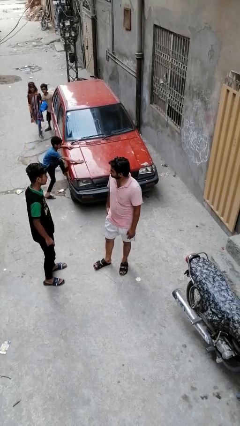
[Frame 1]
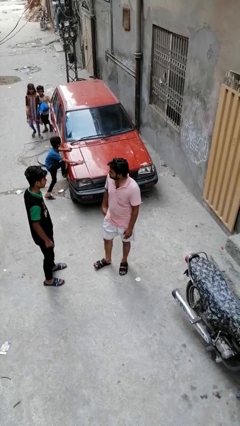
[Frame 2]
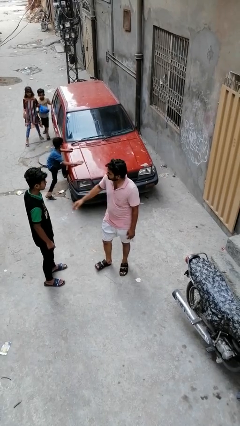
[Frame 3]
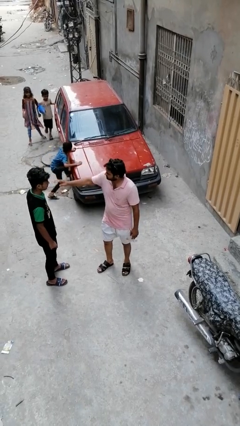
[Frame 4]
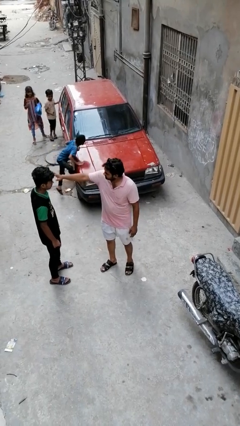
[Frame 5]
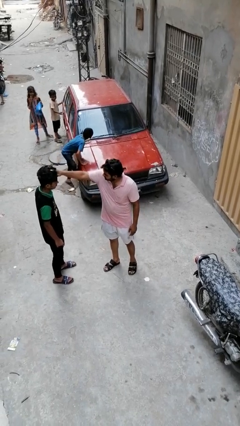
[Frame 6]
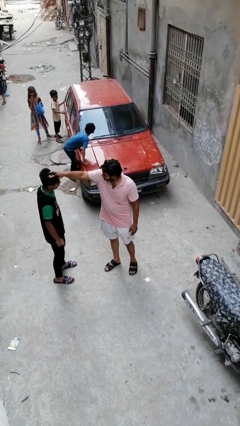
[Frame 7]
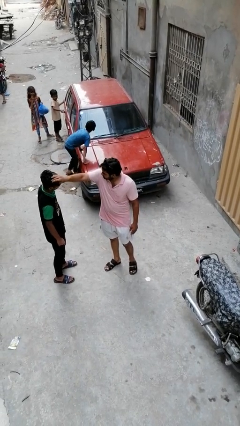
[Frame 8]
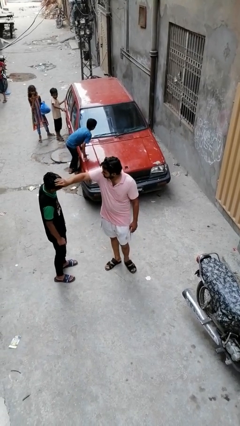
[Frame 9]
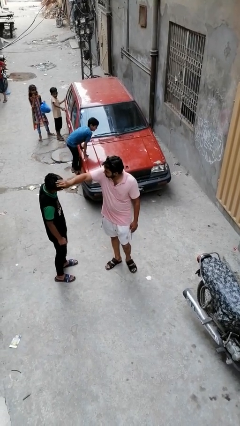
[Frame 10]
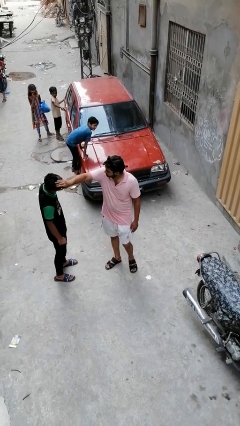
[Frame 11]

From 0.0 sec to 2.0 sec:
person grabs person by hair

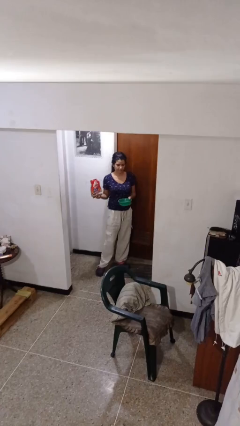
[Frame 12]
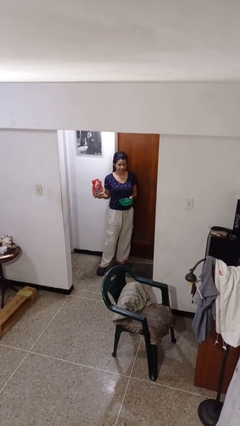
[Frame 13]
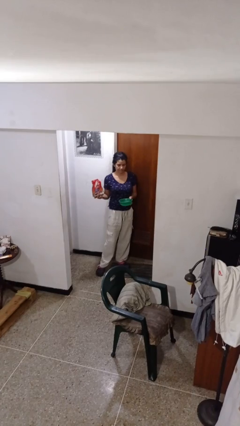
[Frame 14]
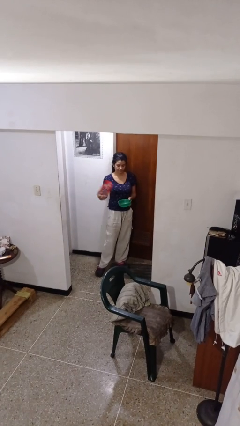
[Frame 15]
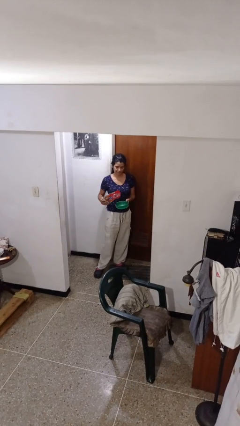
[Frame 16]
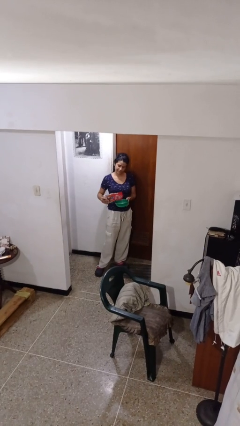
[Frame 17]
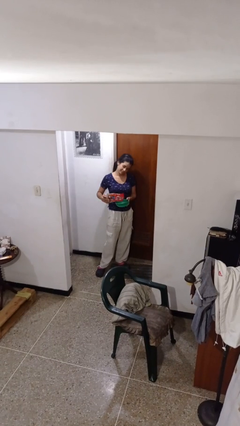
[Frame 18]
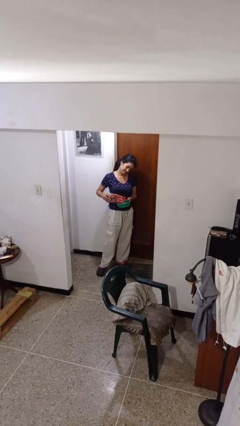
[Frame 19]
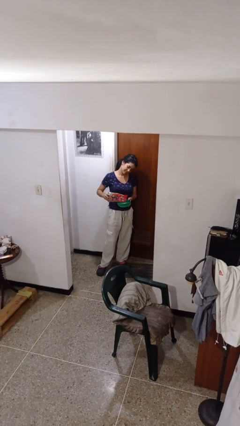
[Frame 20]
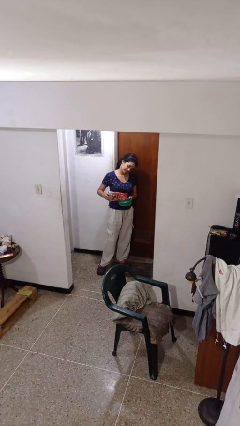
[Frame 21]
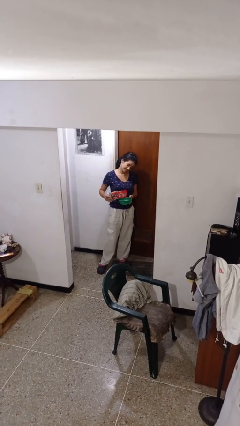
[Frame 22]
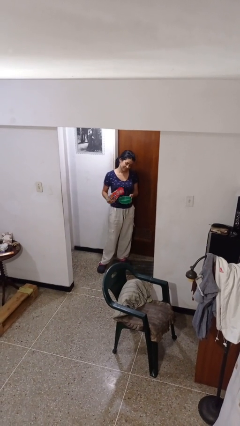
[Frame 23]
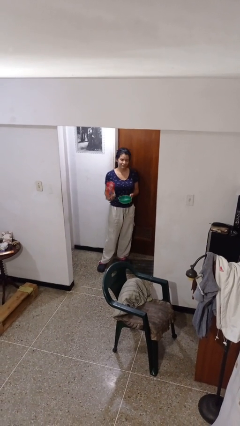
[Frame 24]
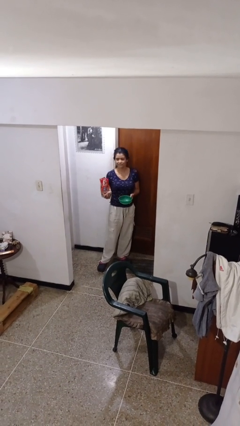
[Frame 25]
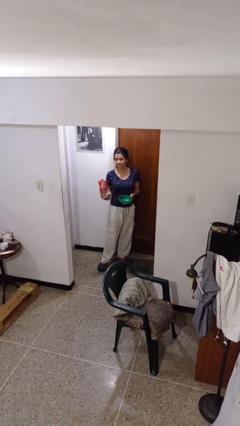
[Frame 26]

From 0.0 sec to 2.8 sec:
person pours into bowl

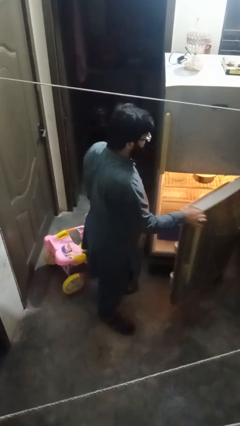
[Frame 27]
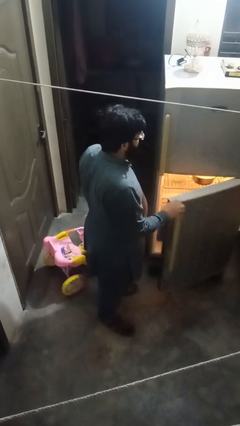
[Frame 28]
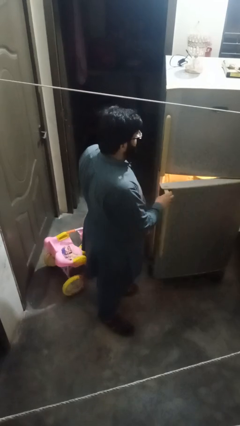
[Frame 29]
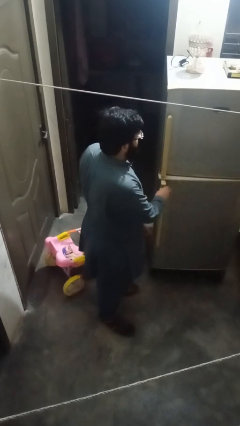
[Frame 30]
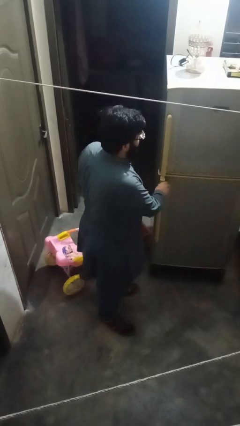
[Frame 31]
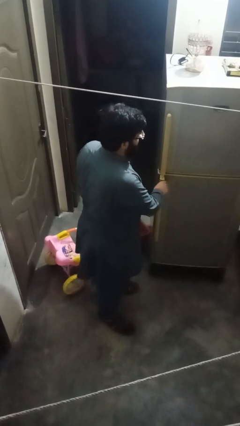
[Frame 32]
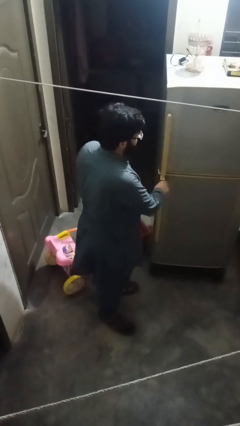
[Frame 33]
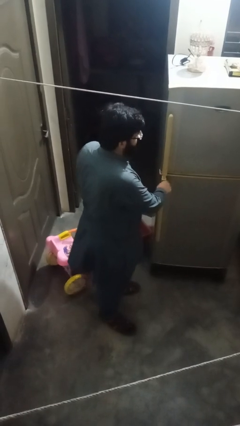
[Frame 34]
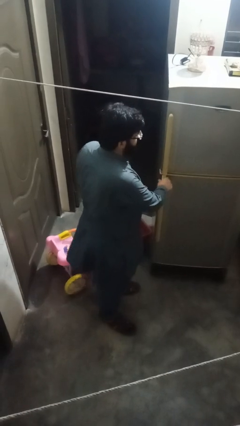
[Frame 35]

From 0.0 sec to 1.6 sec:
person closes refrigerator

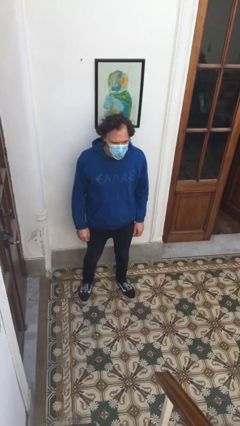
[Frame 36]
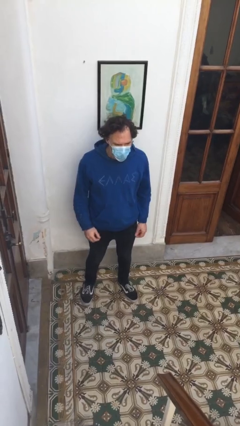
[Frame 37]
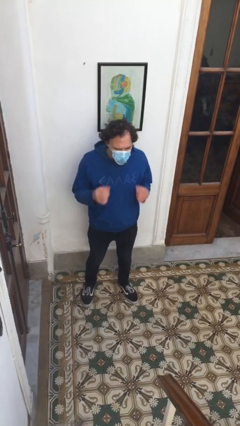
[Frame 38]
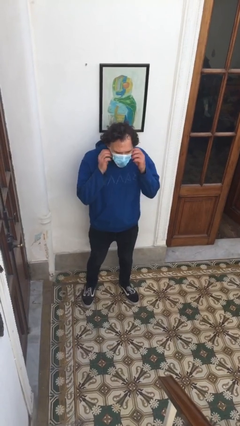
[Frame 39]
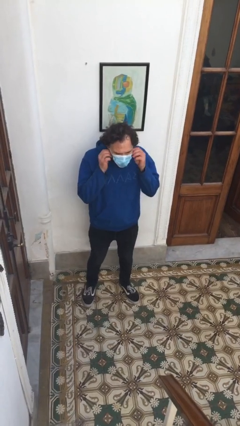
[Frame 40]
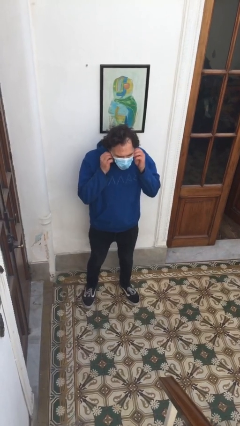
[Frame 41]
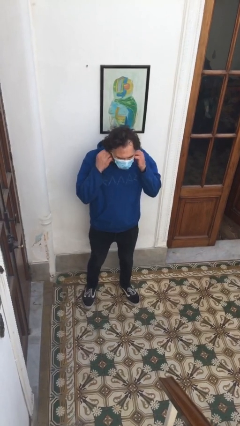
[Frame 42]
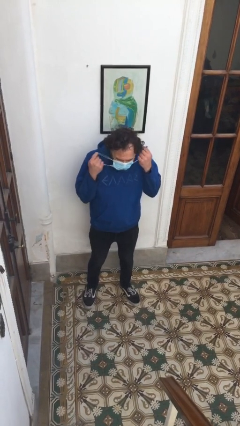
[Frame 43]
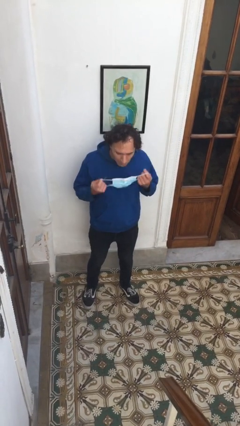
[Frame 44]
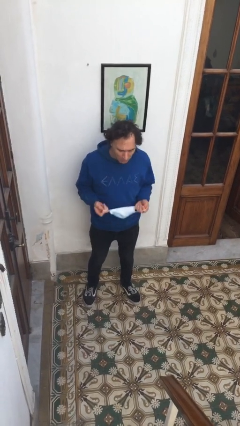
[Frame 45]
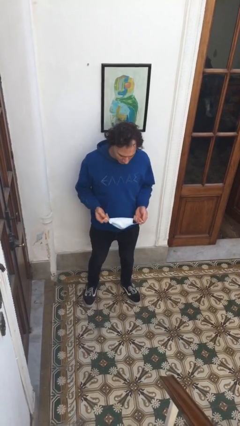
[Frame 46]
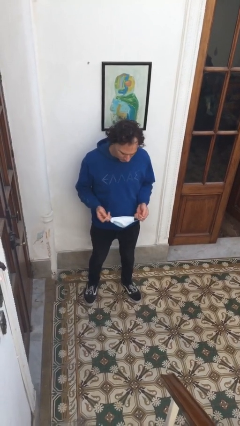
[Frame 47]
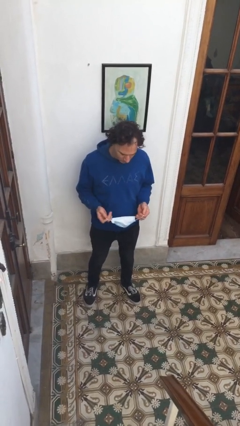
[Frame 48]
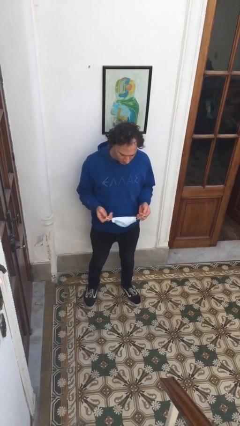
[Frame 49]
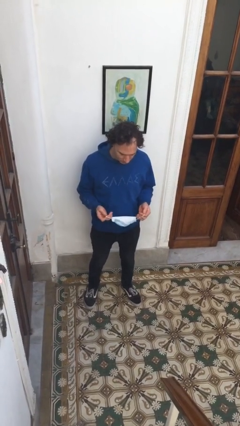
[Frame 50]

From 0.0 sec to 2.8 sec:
person takes off facemask

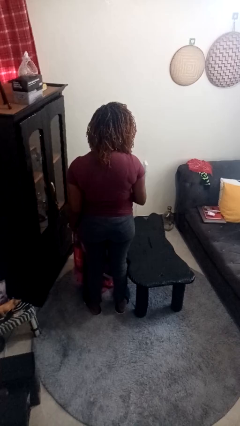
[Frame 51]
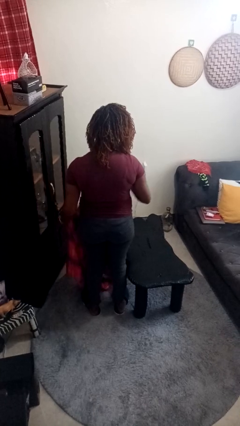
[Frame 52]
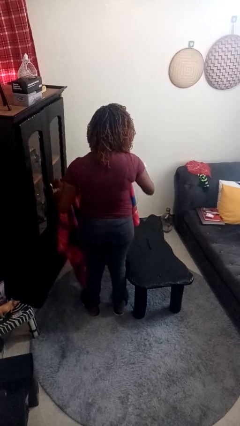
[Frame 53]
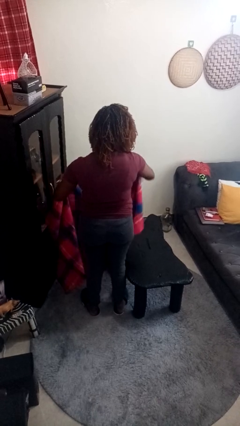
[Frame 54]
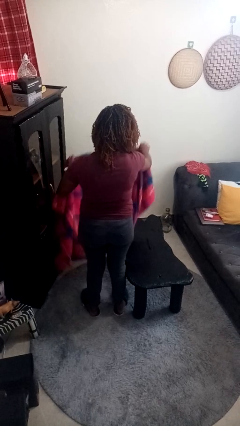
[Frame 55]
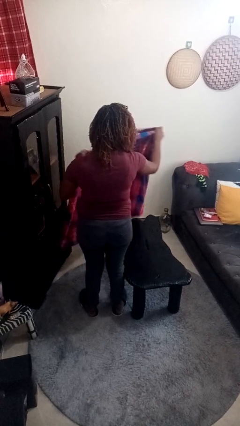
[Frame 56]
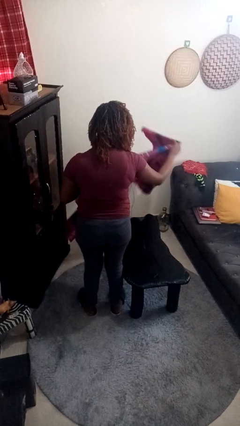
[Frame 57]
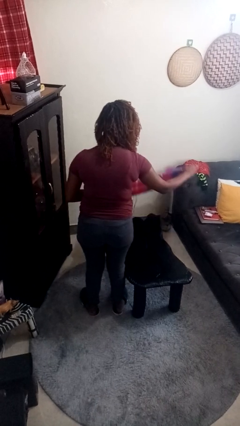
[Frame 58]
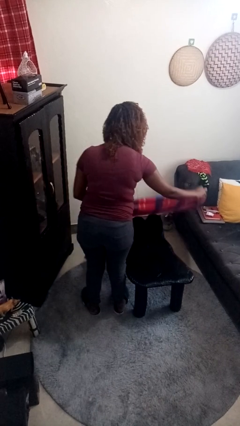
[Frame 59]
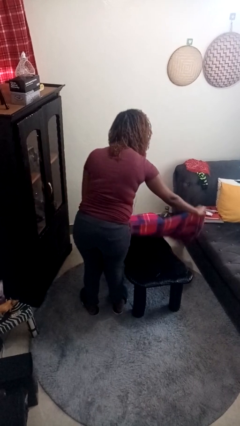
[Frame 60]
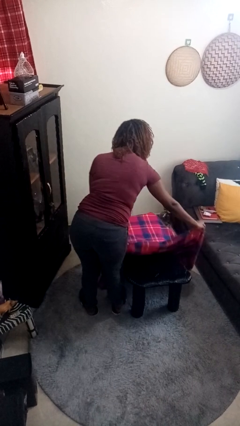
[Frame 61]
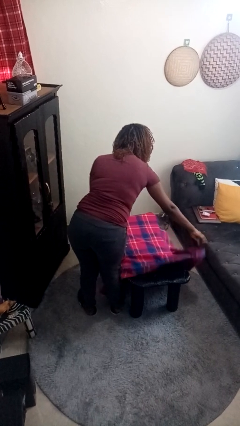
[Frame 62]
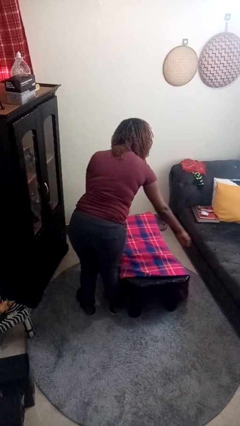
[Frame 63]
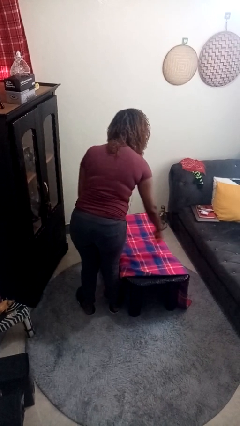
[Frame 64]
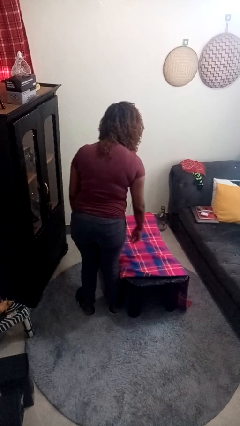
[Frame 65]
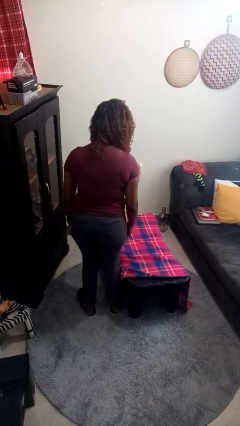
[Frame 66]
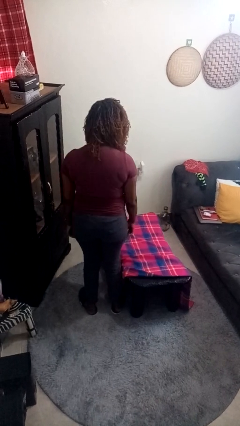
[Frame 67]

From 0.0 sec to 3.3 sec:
person spreads tablecloth

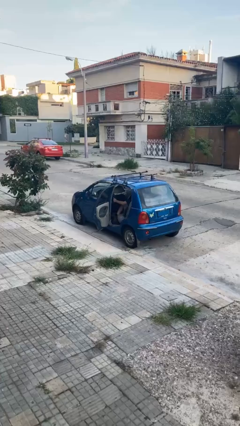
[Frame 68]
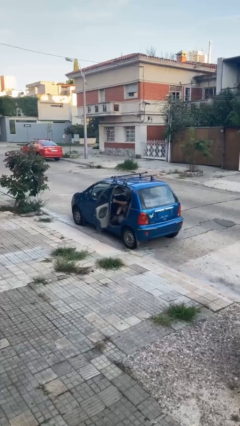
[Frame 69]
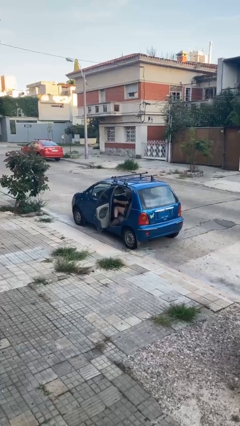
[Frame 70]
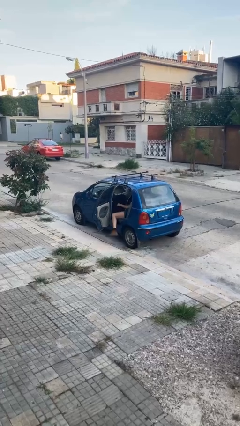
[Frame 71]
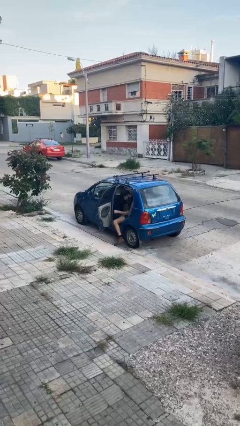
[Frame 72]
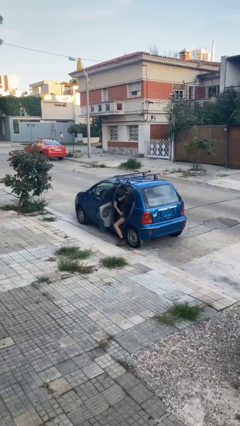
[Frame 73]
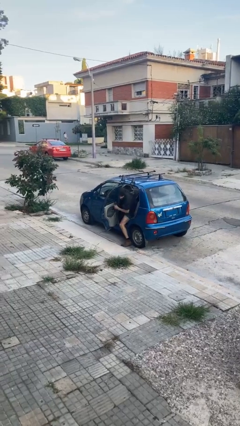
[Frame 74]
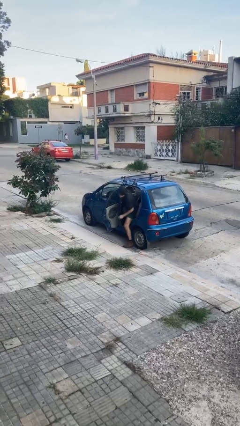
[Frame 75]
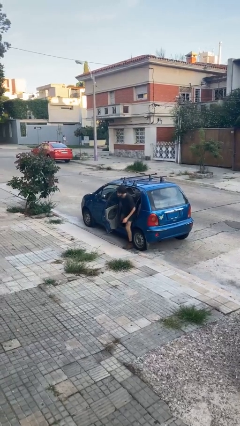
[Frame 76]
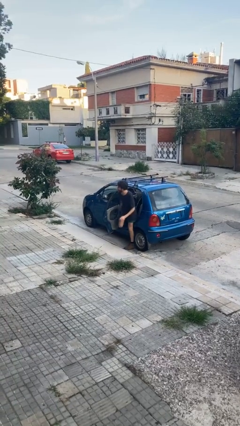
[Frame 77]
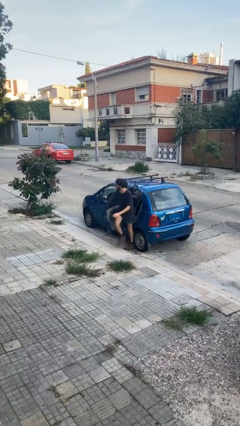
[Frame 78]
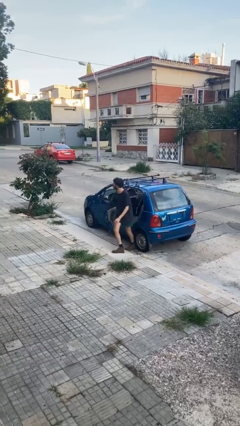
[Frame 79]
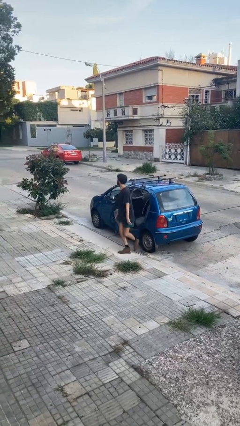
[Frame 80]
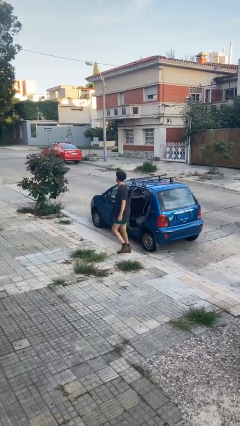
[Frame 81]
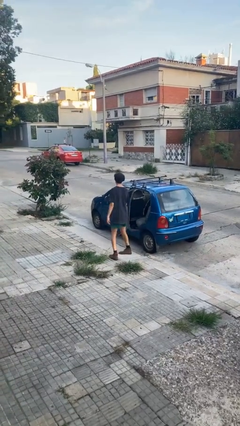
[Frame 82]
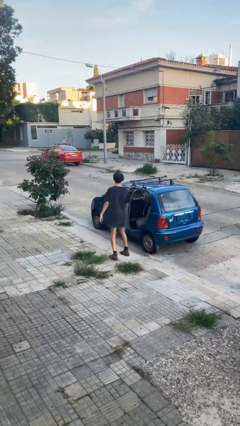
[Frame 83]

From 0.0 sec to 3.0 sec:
person exits car

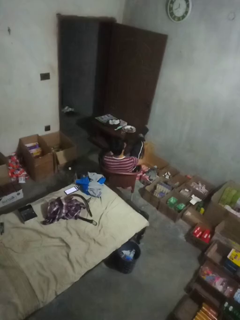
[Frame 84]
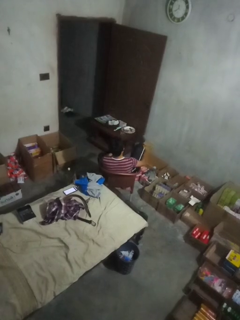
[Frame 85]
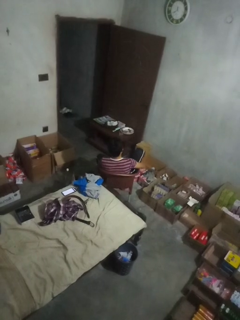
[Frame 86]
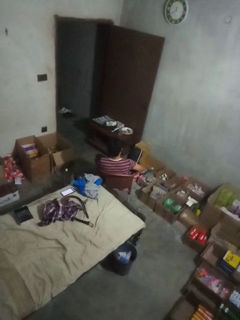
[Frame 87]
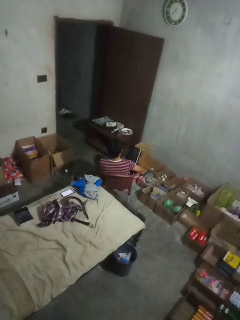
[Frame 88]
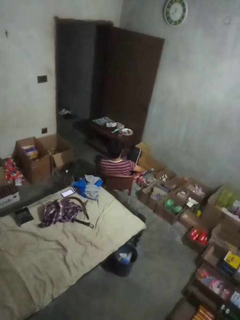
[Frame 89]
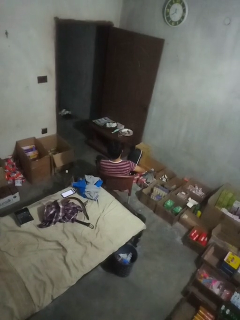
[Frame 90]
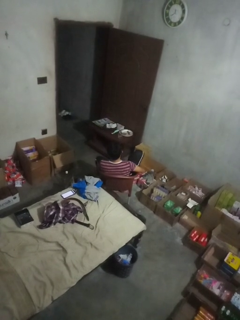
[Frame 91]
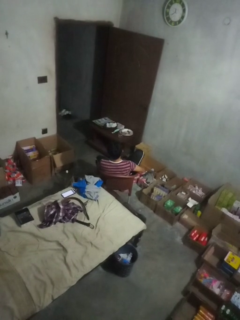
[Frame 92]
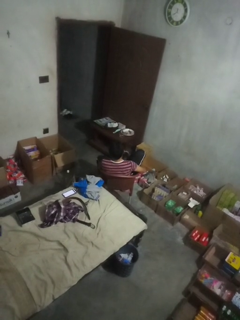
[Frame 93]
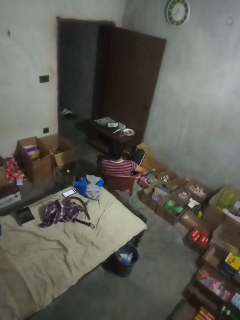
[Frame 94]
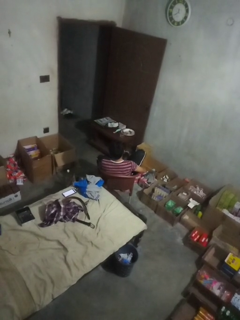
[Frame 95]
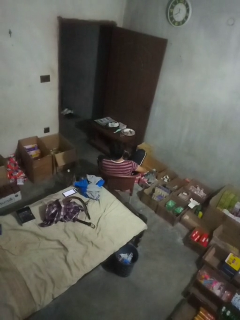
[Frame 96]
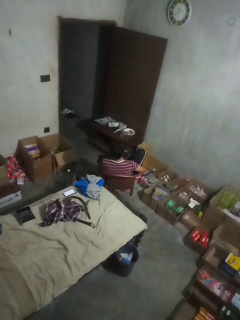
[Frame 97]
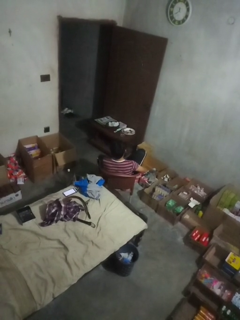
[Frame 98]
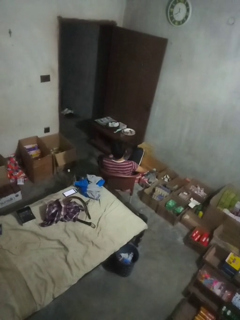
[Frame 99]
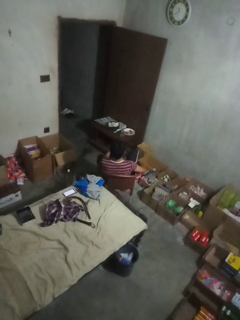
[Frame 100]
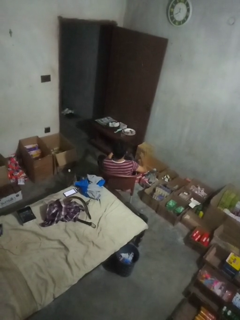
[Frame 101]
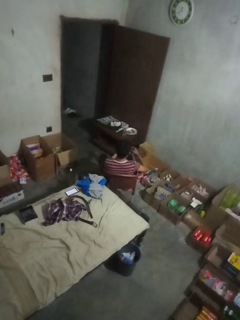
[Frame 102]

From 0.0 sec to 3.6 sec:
person takes off socks
